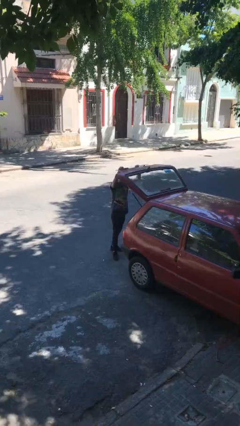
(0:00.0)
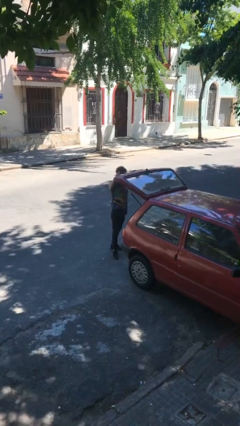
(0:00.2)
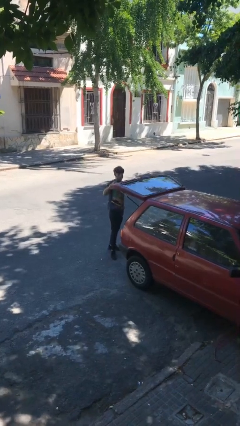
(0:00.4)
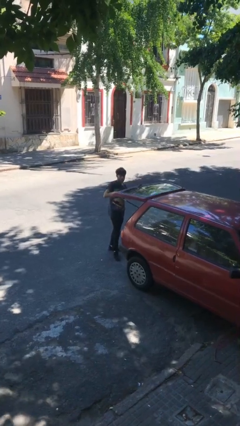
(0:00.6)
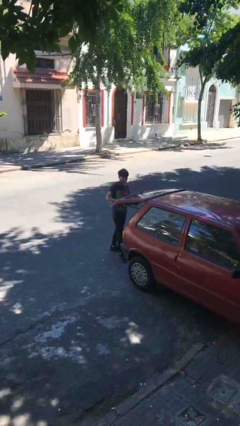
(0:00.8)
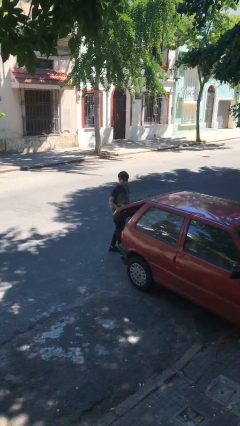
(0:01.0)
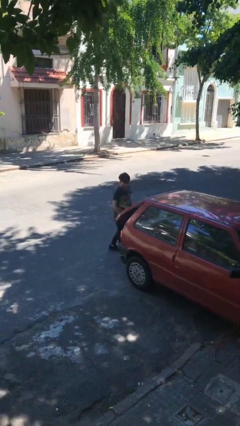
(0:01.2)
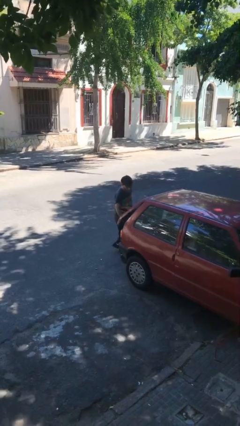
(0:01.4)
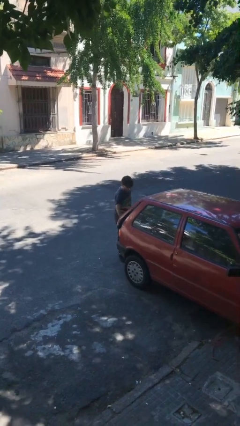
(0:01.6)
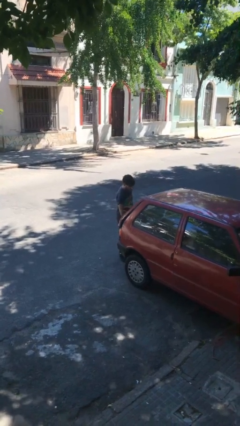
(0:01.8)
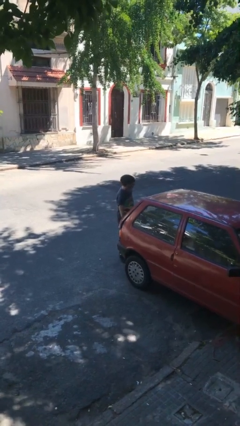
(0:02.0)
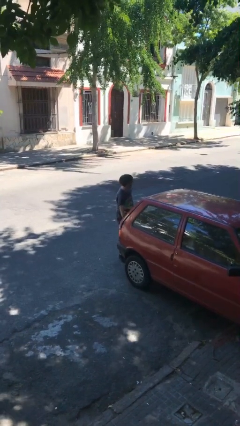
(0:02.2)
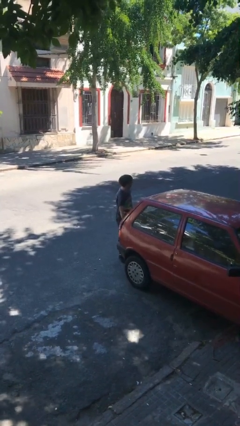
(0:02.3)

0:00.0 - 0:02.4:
person closes car trunk

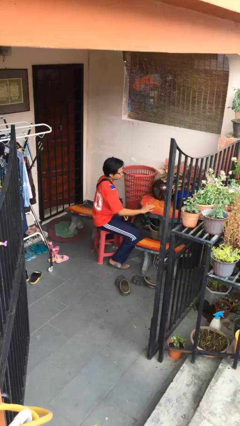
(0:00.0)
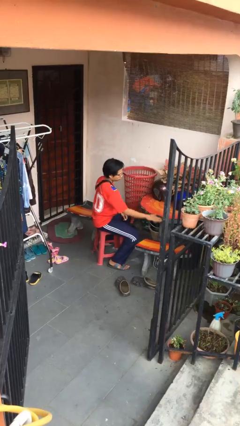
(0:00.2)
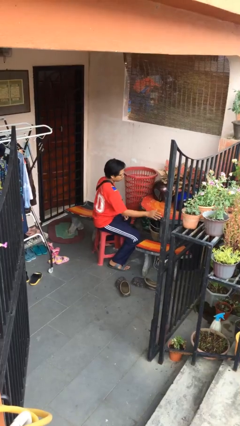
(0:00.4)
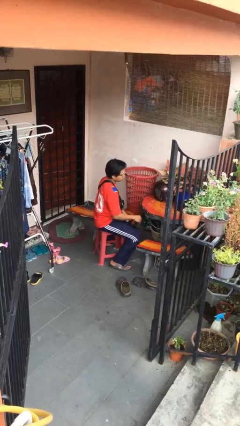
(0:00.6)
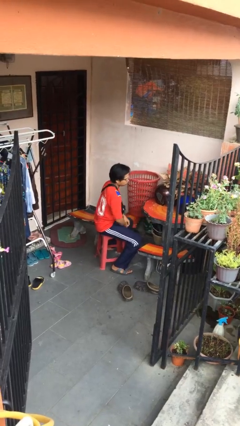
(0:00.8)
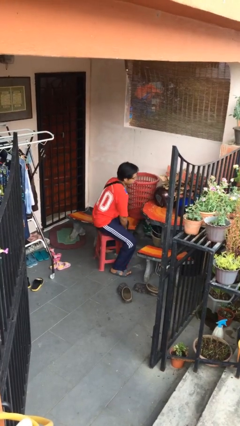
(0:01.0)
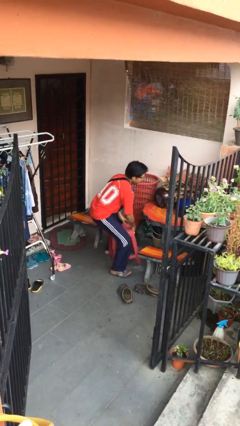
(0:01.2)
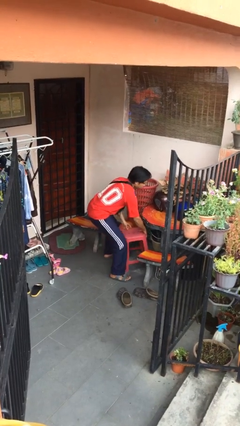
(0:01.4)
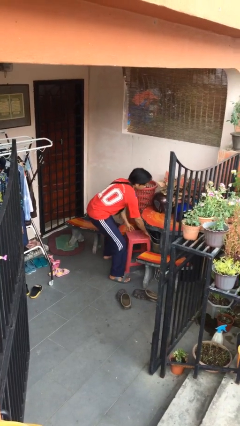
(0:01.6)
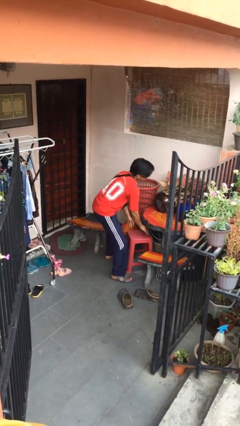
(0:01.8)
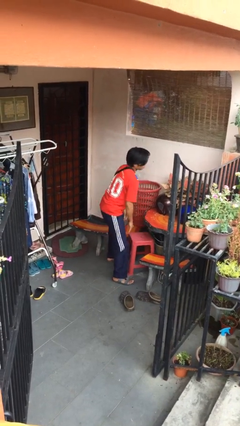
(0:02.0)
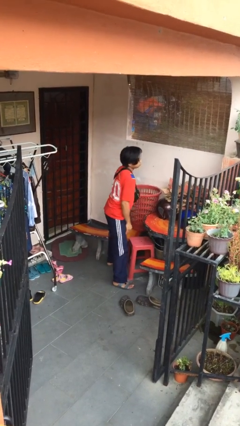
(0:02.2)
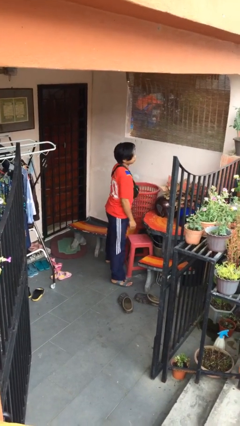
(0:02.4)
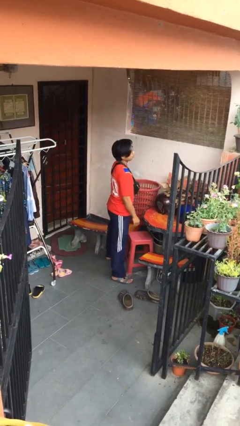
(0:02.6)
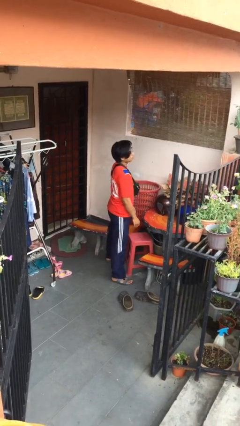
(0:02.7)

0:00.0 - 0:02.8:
person stands up

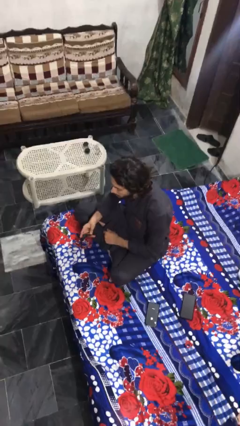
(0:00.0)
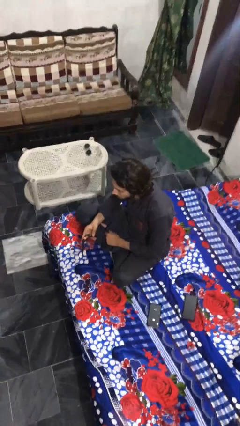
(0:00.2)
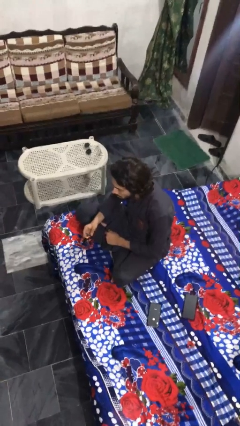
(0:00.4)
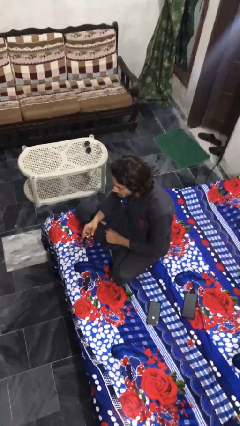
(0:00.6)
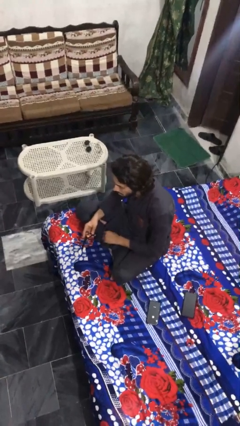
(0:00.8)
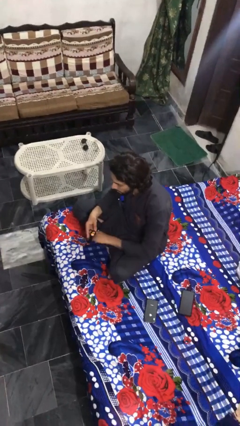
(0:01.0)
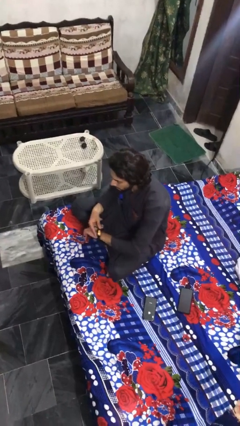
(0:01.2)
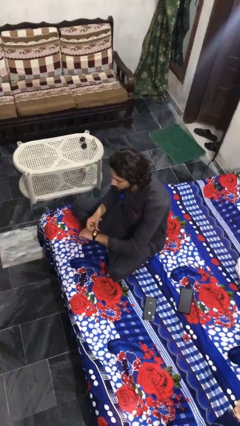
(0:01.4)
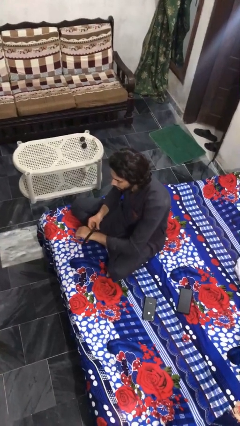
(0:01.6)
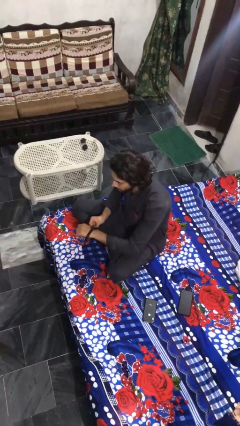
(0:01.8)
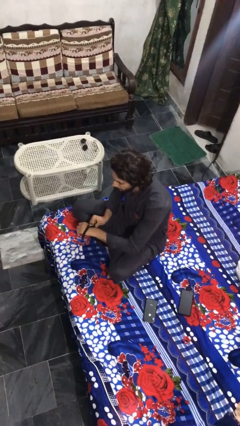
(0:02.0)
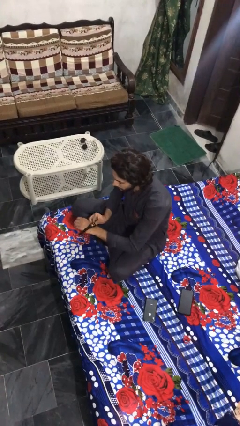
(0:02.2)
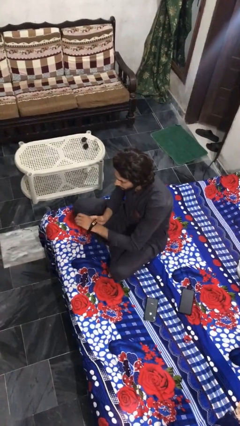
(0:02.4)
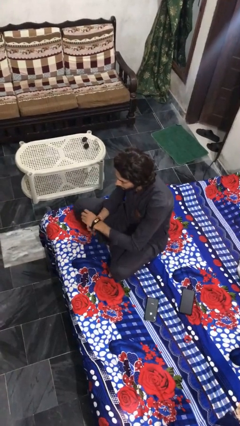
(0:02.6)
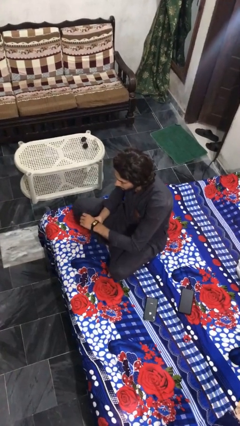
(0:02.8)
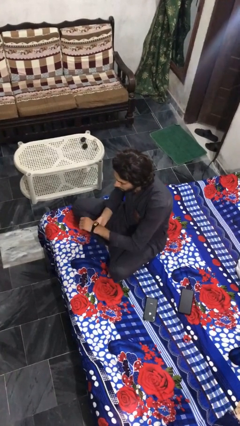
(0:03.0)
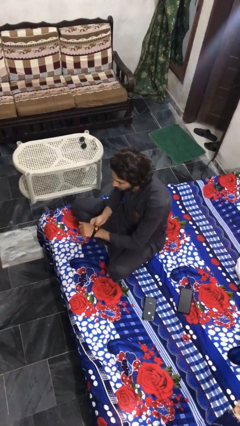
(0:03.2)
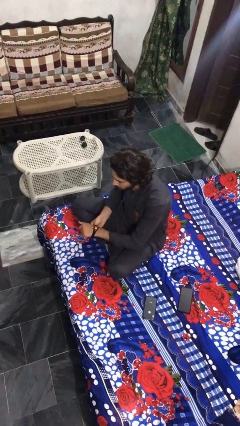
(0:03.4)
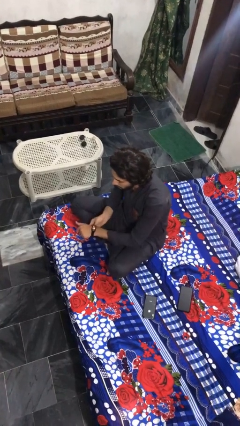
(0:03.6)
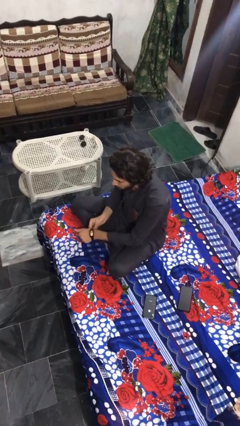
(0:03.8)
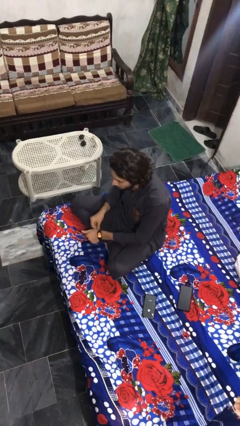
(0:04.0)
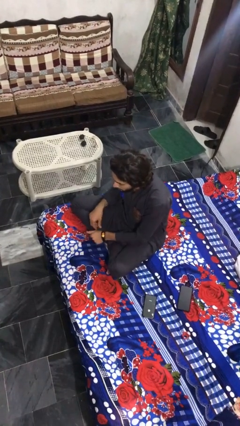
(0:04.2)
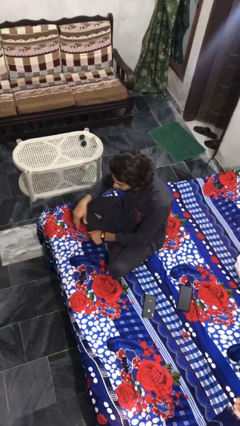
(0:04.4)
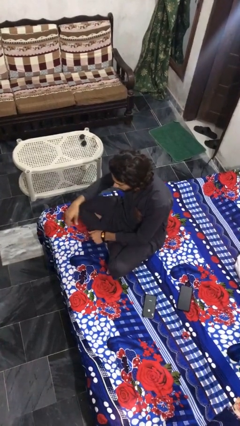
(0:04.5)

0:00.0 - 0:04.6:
person puts on wristwatch

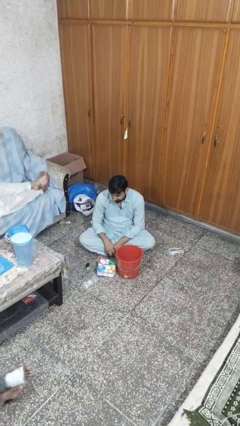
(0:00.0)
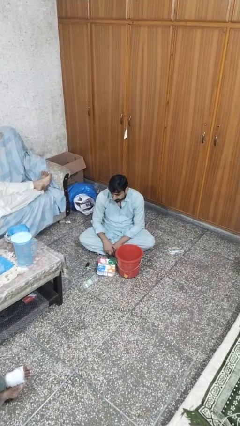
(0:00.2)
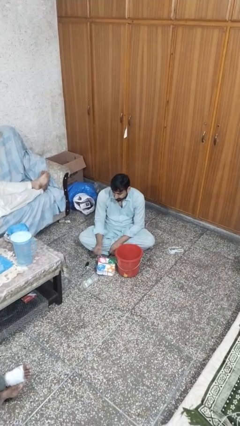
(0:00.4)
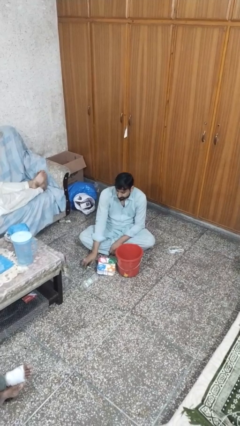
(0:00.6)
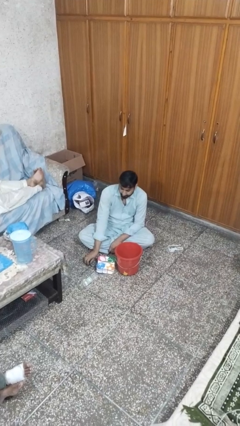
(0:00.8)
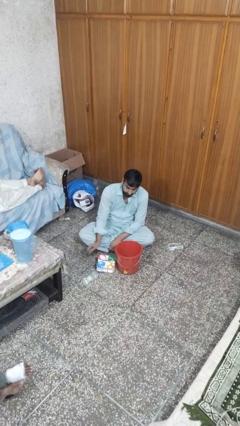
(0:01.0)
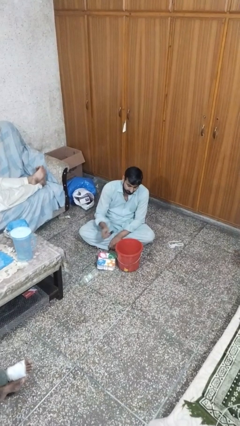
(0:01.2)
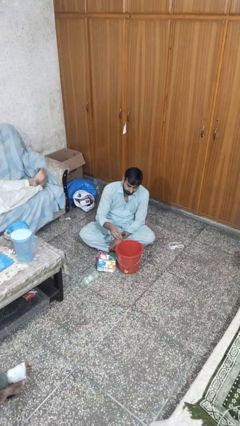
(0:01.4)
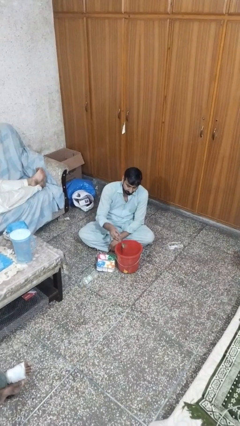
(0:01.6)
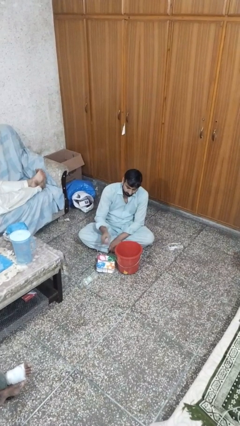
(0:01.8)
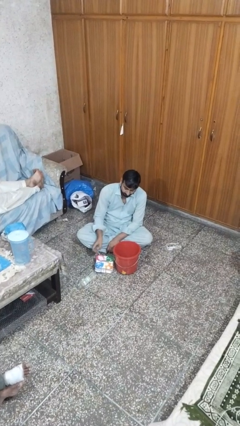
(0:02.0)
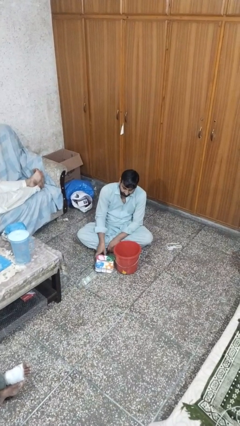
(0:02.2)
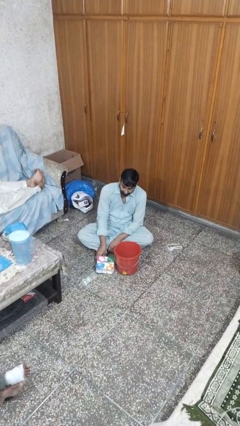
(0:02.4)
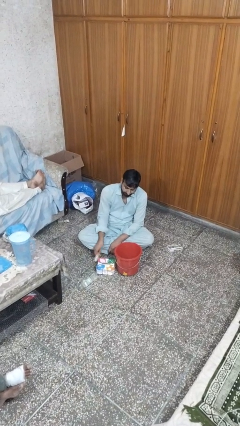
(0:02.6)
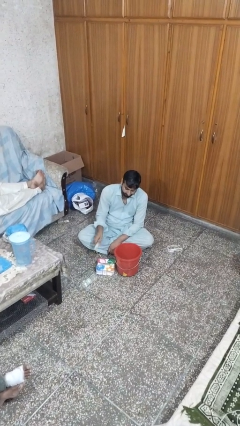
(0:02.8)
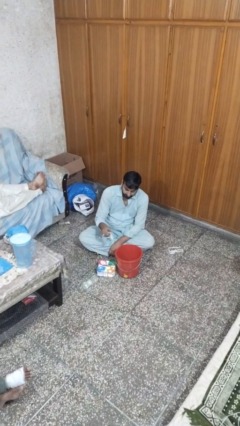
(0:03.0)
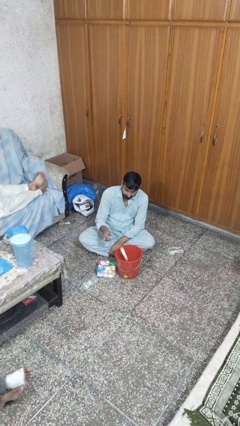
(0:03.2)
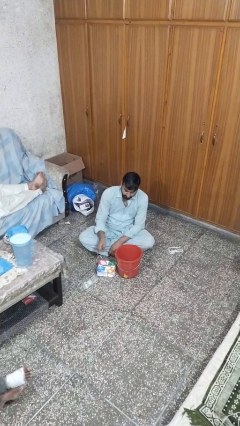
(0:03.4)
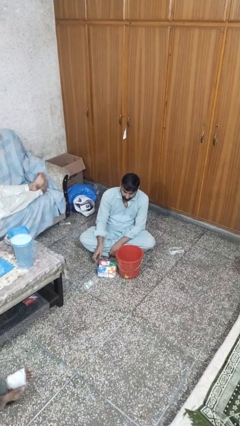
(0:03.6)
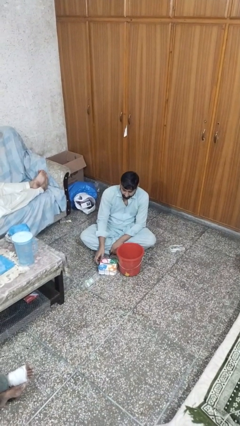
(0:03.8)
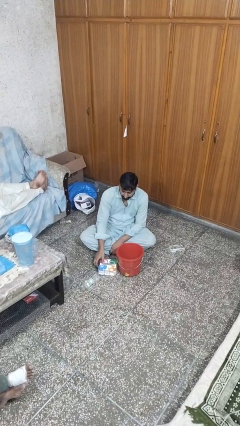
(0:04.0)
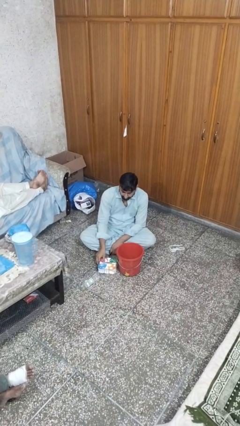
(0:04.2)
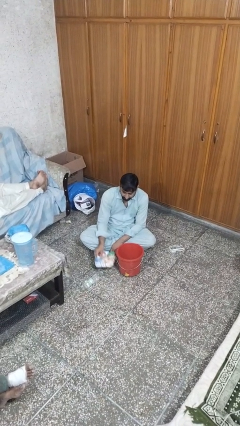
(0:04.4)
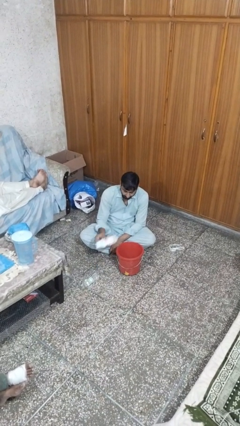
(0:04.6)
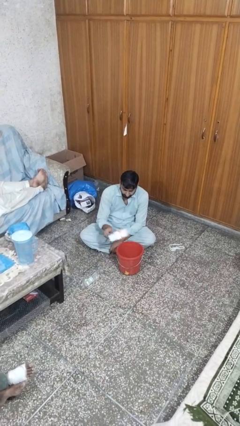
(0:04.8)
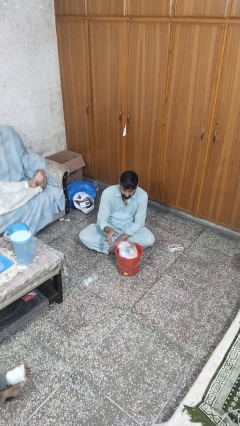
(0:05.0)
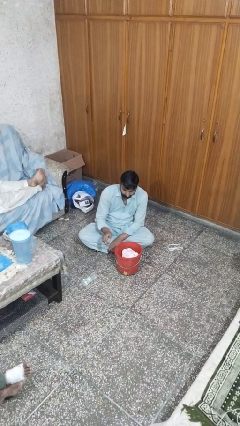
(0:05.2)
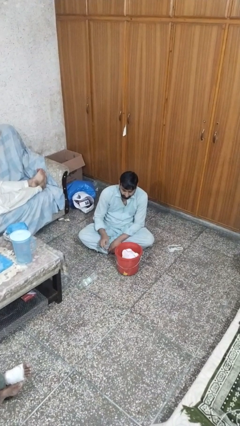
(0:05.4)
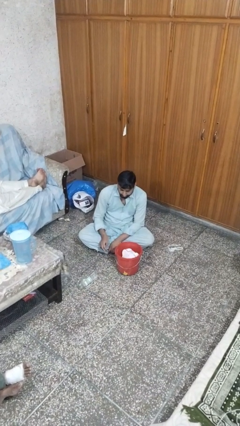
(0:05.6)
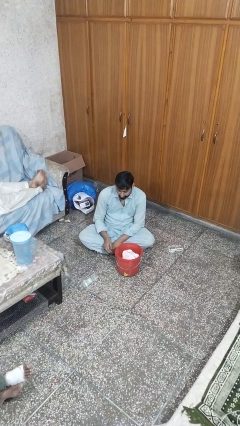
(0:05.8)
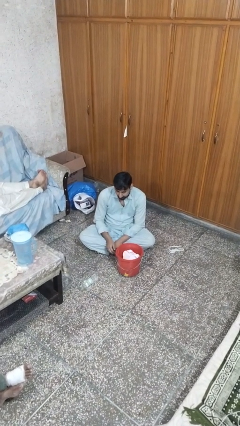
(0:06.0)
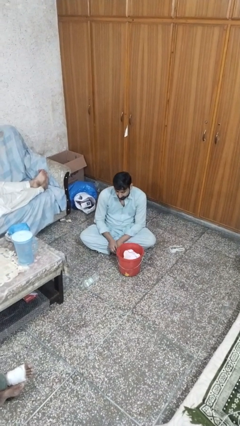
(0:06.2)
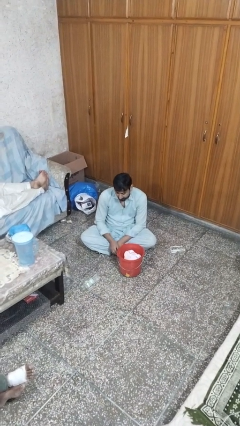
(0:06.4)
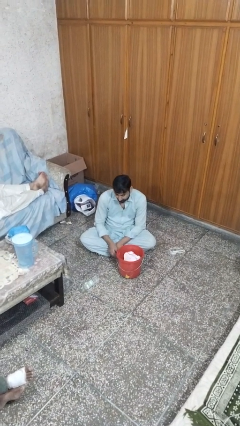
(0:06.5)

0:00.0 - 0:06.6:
person puts object into basket

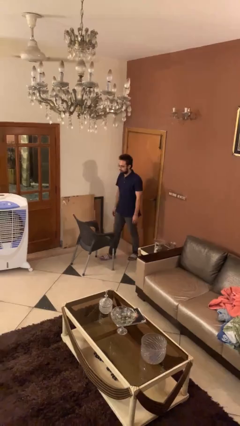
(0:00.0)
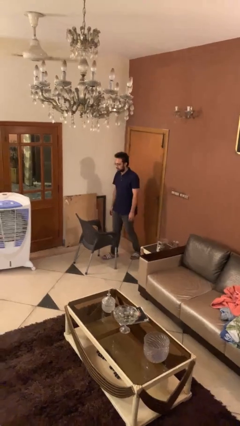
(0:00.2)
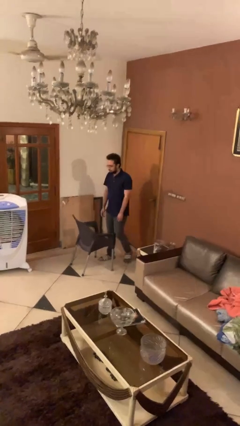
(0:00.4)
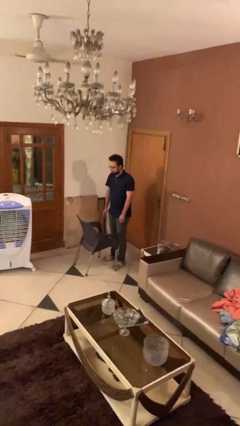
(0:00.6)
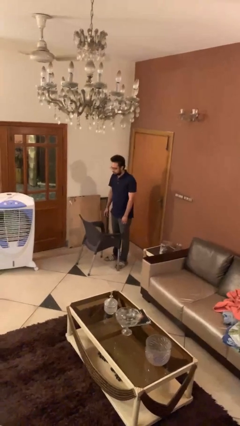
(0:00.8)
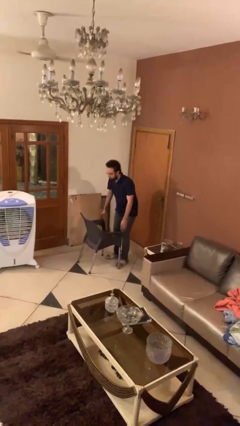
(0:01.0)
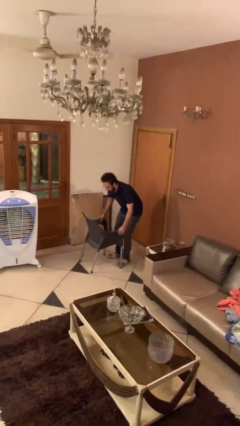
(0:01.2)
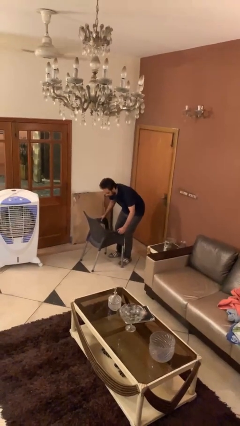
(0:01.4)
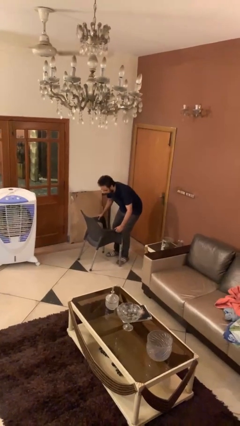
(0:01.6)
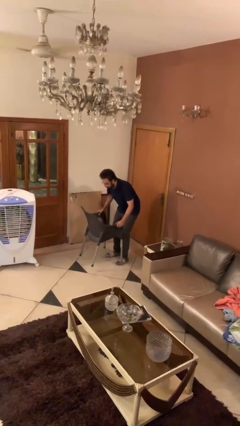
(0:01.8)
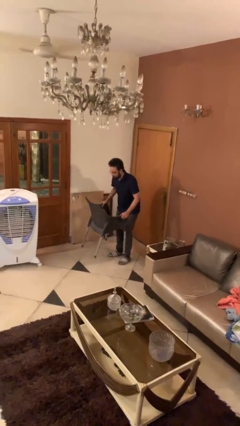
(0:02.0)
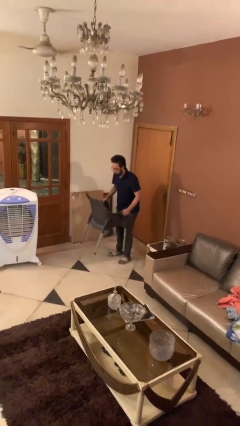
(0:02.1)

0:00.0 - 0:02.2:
person picks up object from floor
